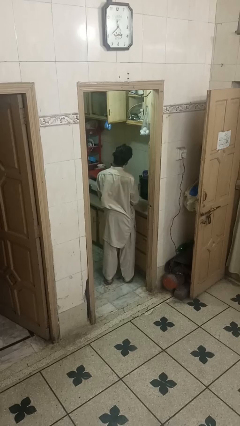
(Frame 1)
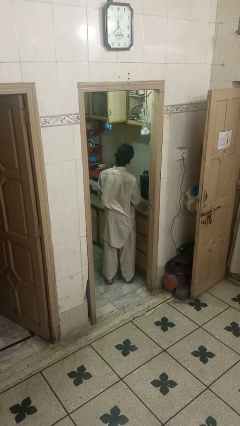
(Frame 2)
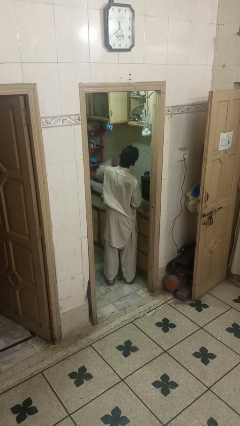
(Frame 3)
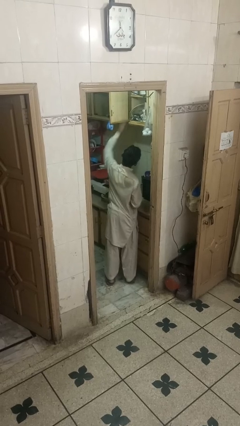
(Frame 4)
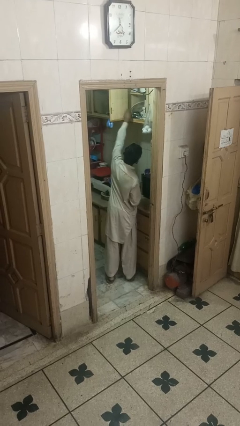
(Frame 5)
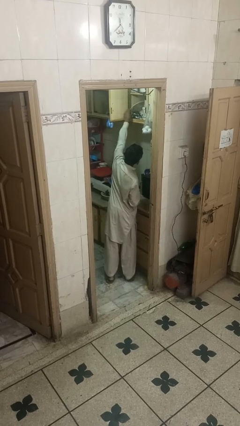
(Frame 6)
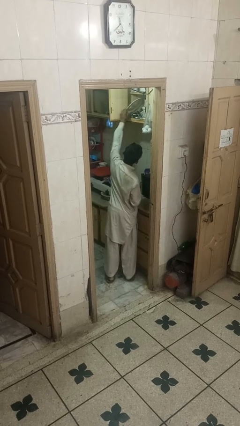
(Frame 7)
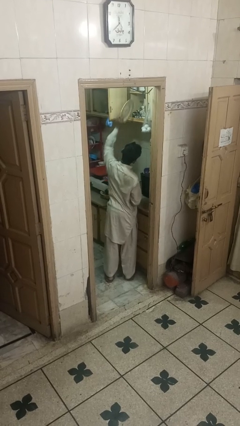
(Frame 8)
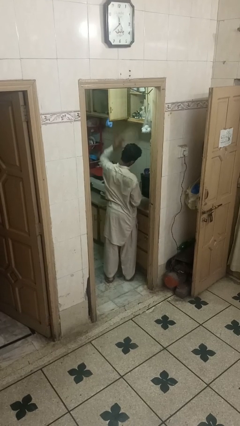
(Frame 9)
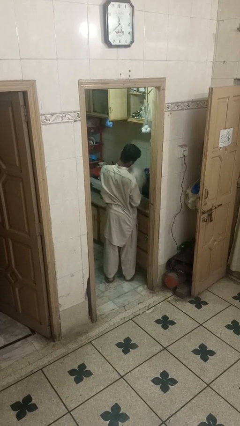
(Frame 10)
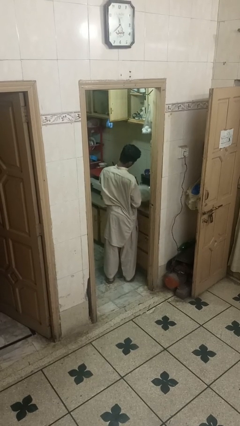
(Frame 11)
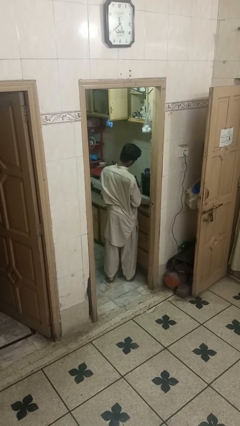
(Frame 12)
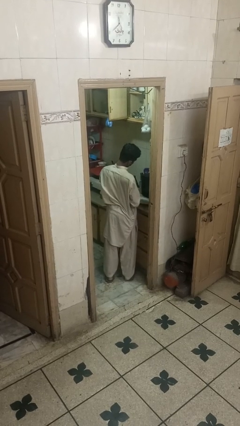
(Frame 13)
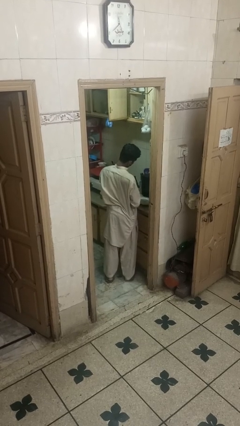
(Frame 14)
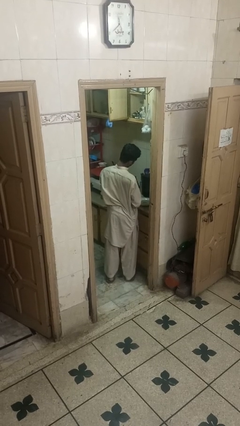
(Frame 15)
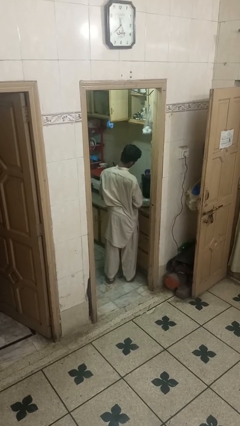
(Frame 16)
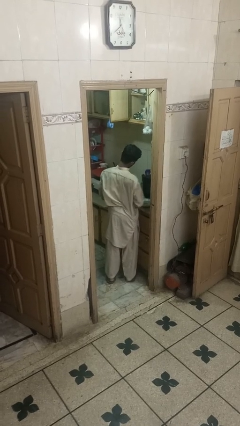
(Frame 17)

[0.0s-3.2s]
person takes object from cabinet

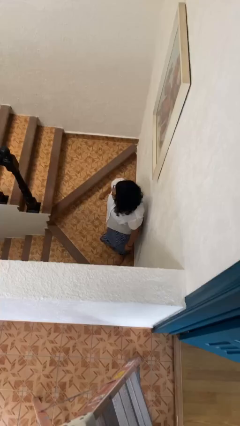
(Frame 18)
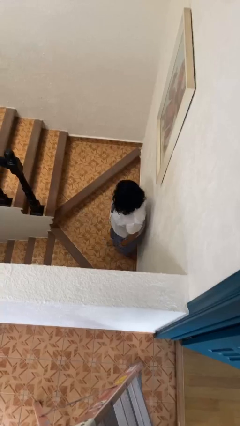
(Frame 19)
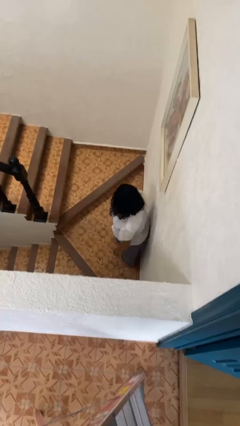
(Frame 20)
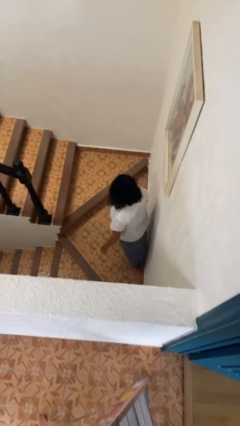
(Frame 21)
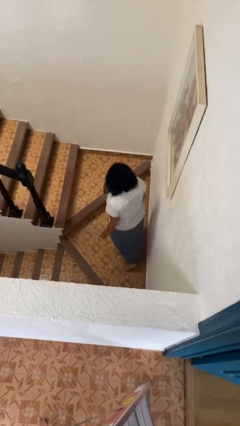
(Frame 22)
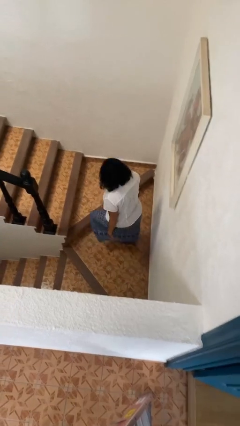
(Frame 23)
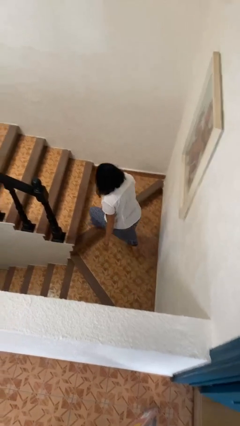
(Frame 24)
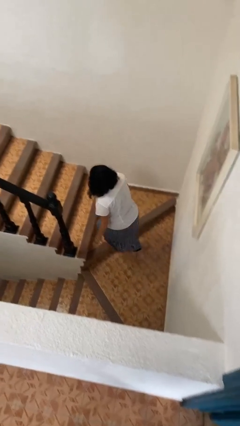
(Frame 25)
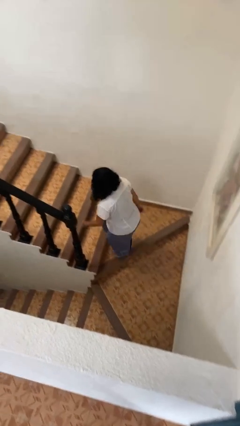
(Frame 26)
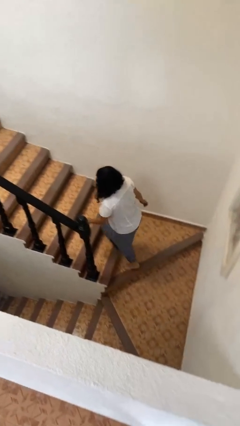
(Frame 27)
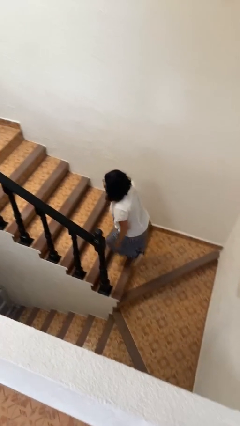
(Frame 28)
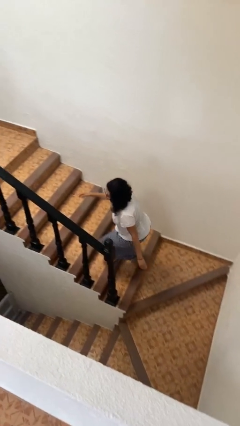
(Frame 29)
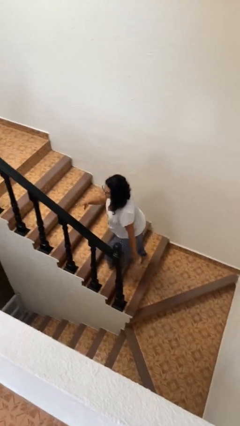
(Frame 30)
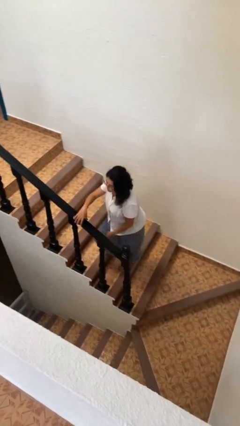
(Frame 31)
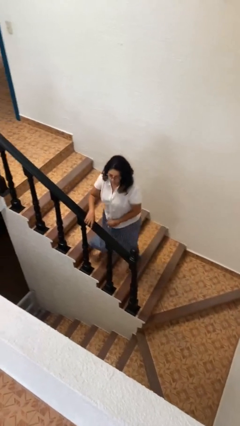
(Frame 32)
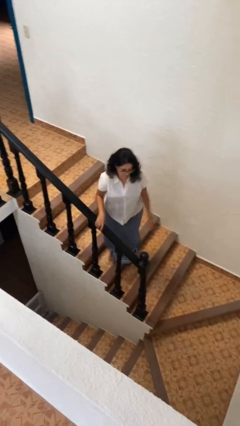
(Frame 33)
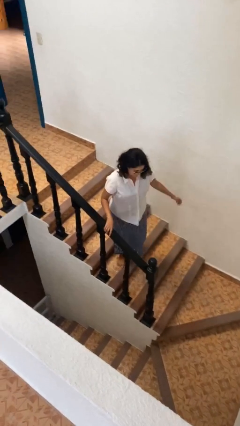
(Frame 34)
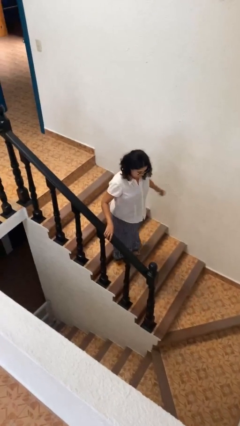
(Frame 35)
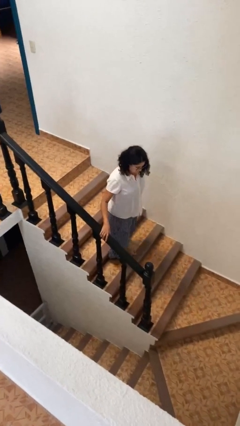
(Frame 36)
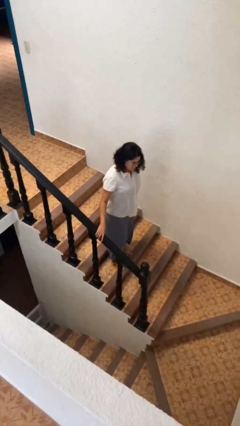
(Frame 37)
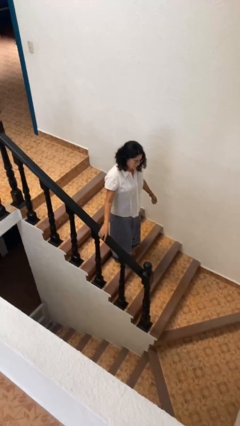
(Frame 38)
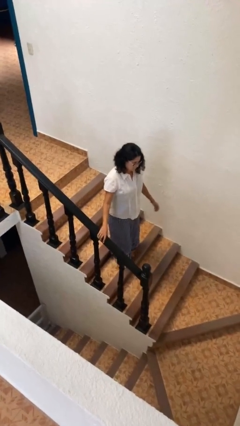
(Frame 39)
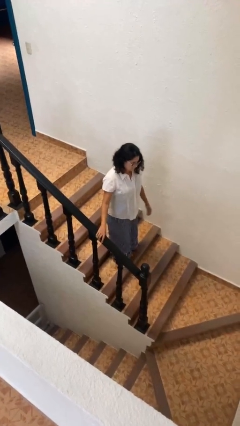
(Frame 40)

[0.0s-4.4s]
person climbs up stairs

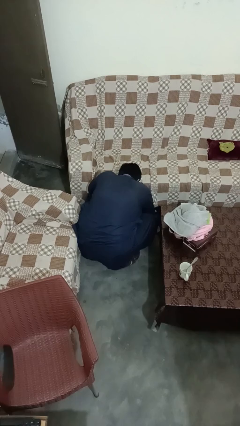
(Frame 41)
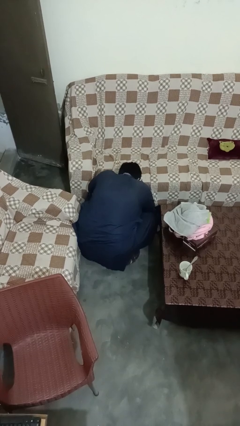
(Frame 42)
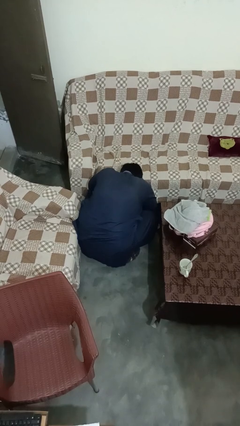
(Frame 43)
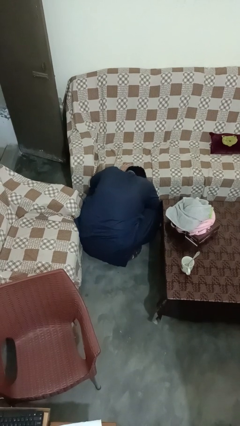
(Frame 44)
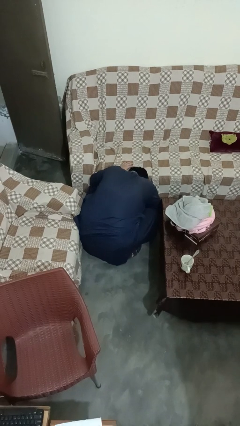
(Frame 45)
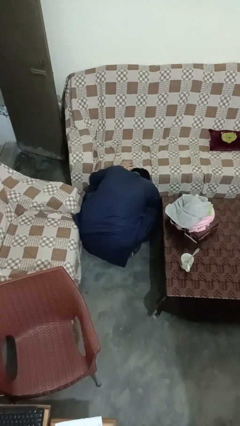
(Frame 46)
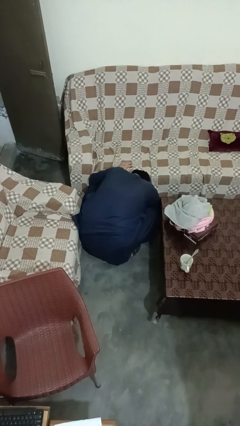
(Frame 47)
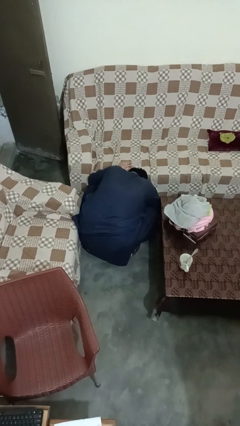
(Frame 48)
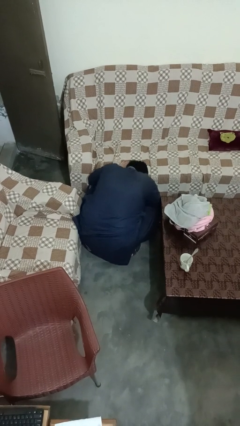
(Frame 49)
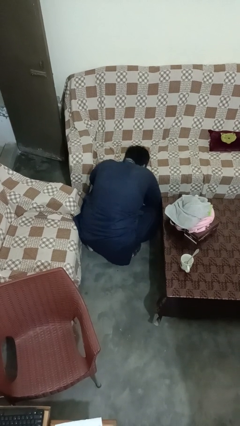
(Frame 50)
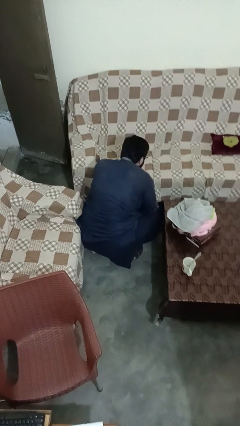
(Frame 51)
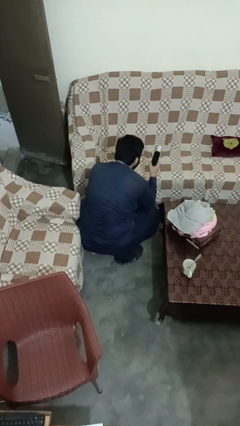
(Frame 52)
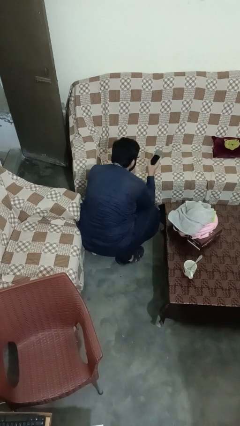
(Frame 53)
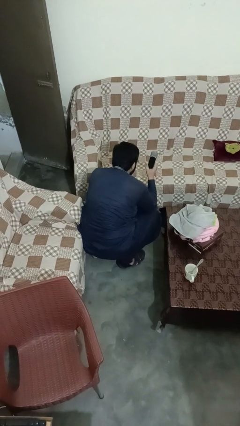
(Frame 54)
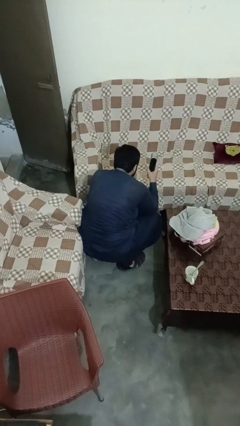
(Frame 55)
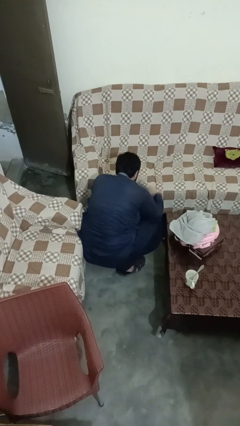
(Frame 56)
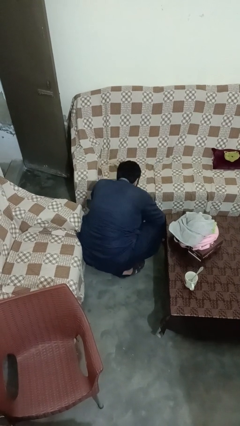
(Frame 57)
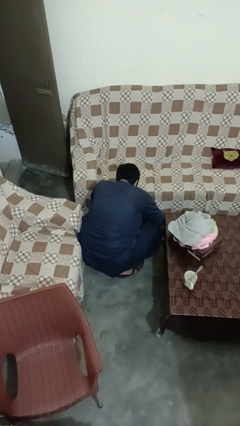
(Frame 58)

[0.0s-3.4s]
person searches under couch

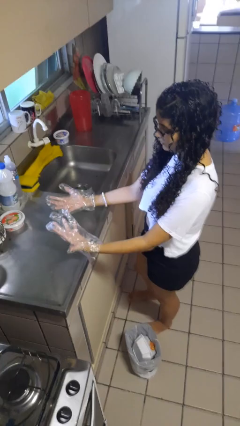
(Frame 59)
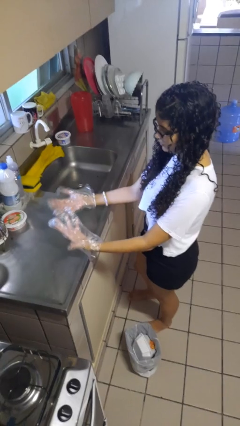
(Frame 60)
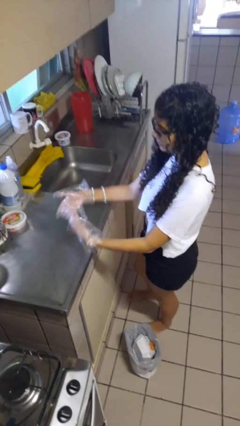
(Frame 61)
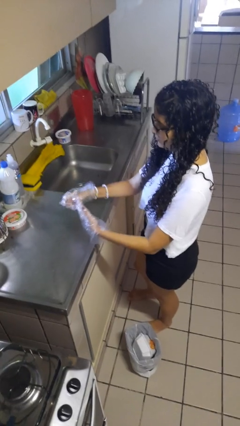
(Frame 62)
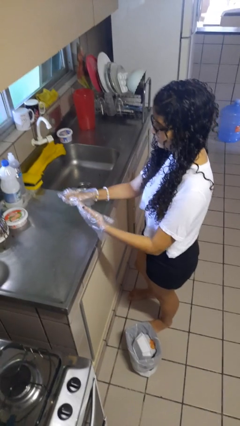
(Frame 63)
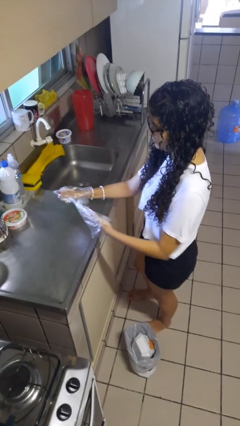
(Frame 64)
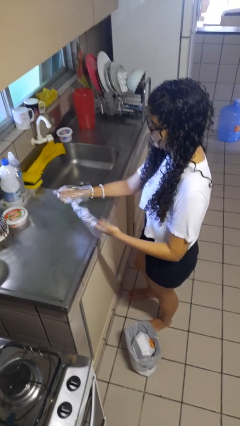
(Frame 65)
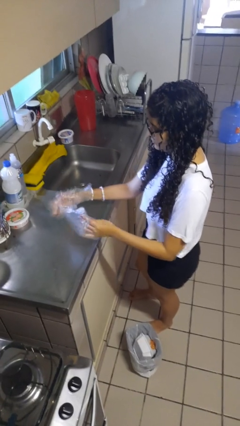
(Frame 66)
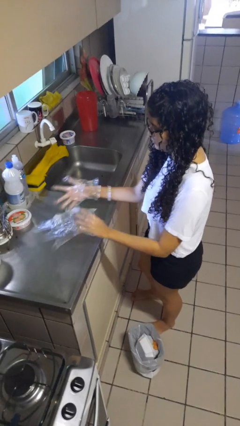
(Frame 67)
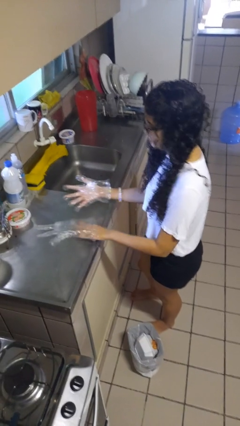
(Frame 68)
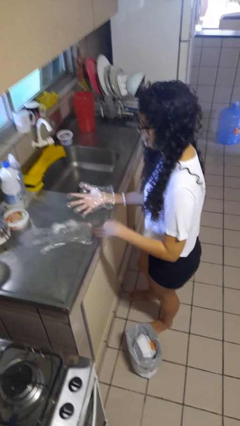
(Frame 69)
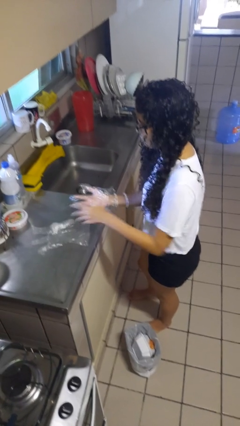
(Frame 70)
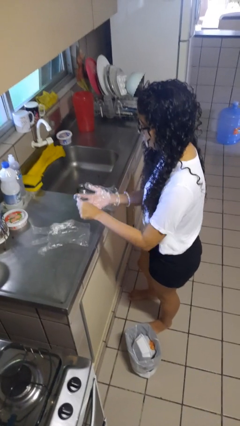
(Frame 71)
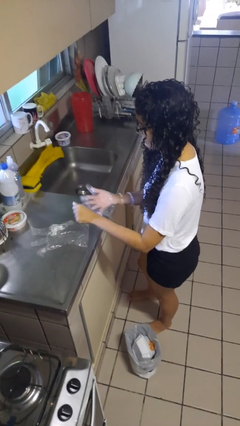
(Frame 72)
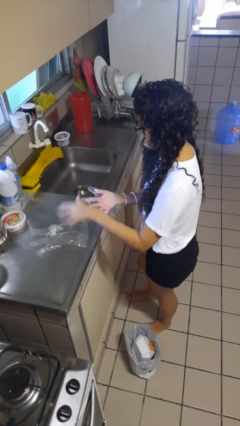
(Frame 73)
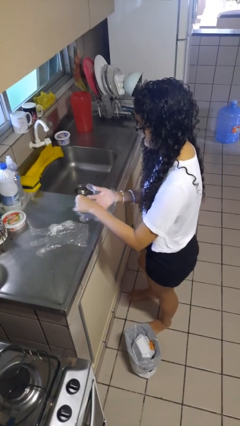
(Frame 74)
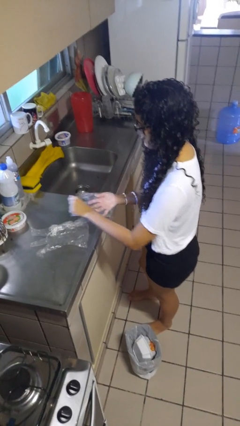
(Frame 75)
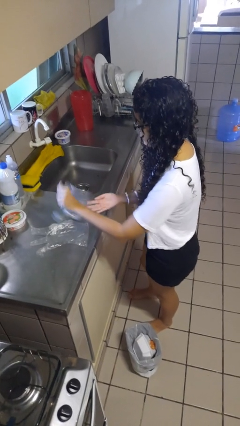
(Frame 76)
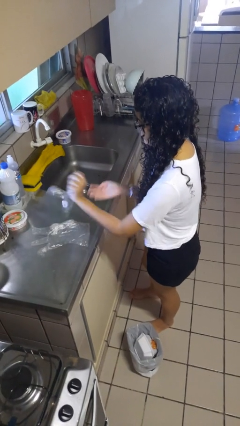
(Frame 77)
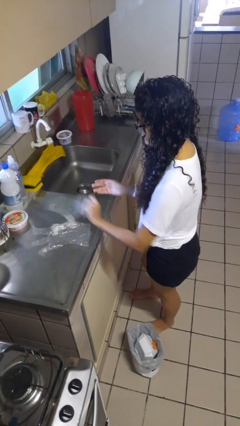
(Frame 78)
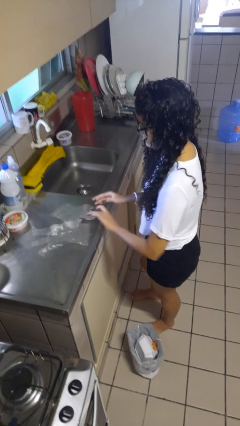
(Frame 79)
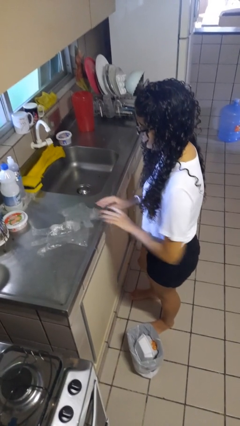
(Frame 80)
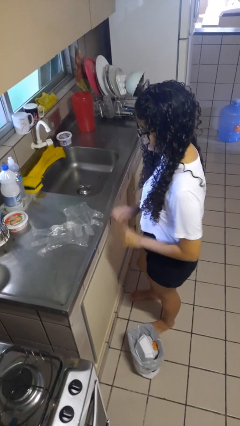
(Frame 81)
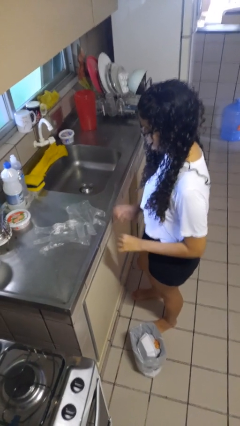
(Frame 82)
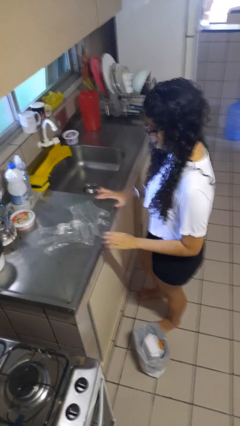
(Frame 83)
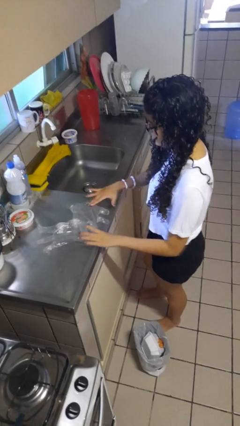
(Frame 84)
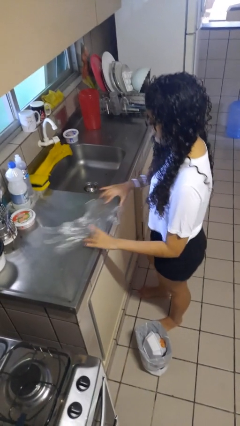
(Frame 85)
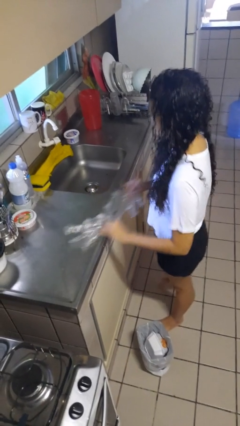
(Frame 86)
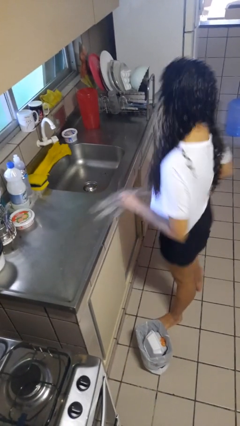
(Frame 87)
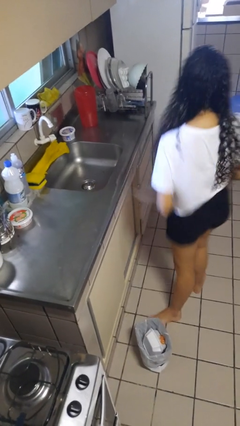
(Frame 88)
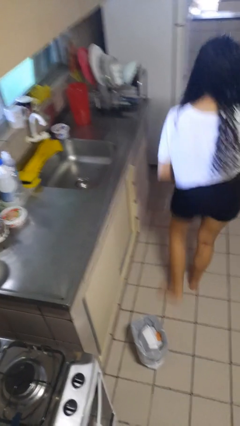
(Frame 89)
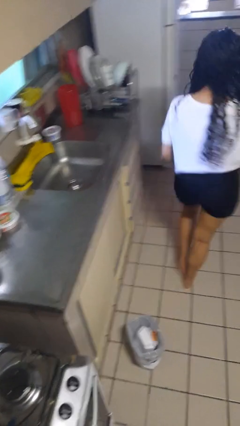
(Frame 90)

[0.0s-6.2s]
person takes off gloves

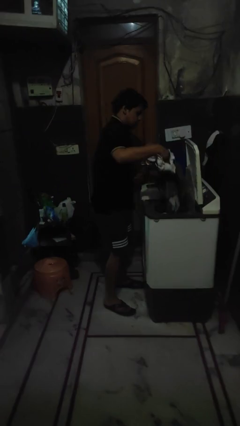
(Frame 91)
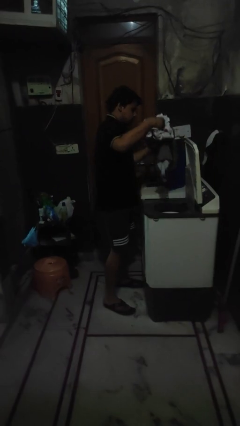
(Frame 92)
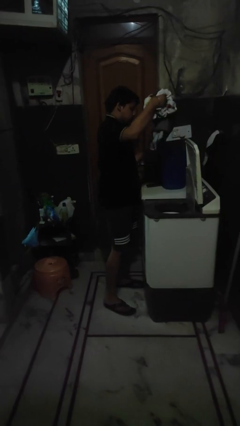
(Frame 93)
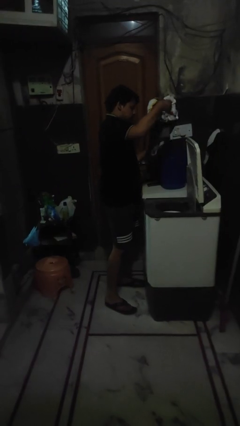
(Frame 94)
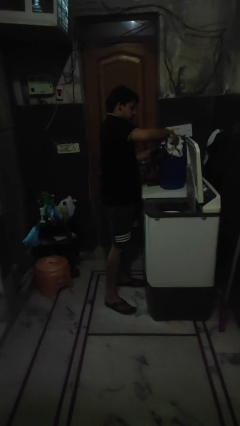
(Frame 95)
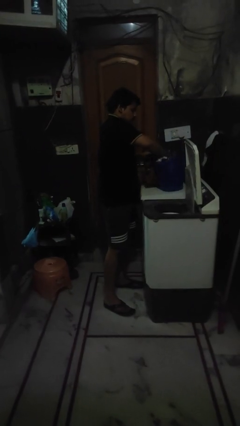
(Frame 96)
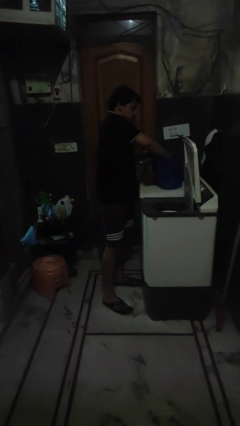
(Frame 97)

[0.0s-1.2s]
person unloads clotheswasher
